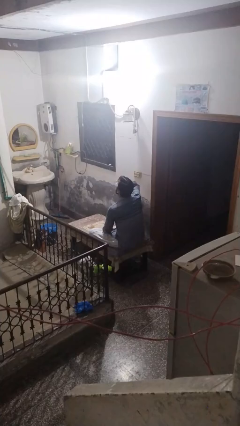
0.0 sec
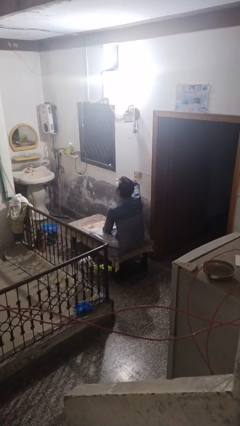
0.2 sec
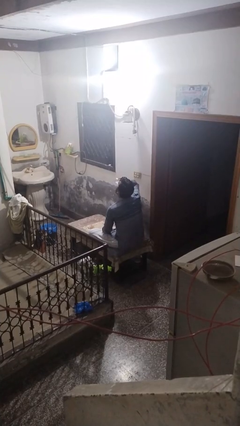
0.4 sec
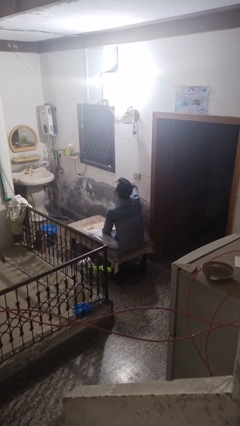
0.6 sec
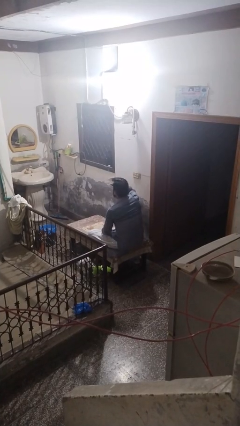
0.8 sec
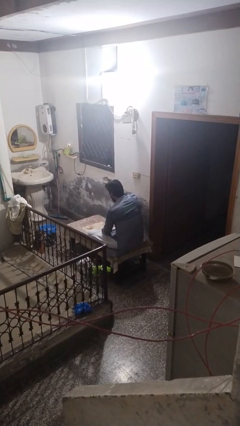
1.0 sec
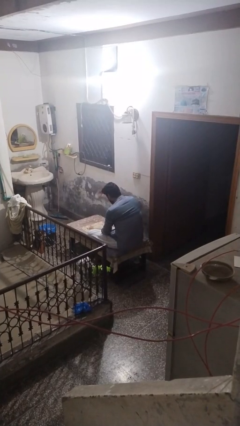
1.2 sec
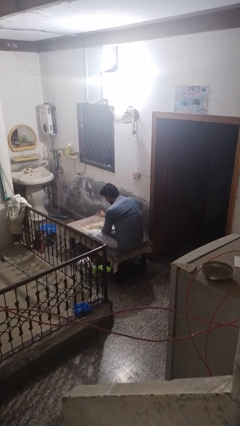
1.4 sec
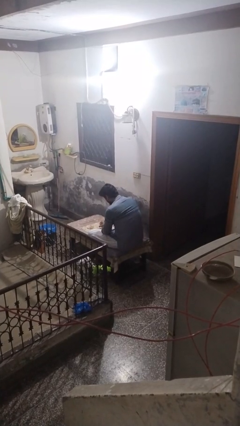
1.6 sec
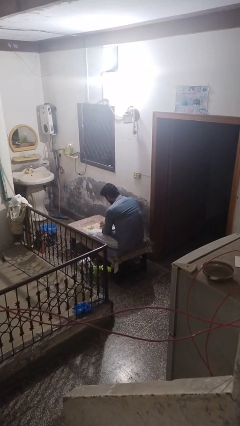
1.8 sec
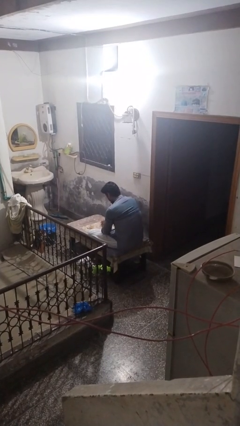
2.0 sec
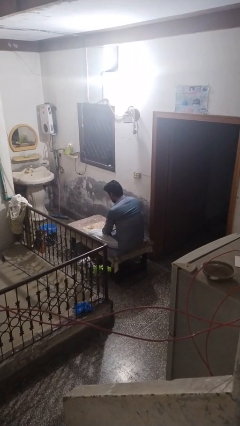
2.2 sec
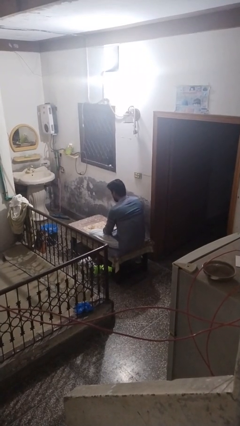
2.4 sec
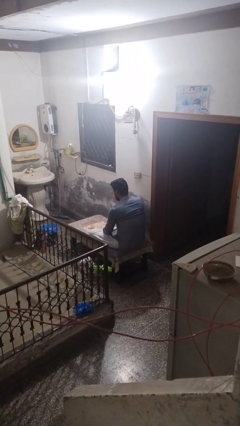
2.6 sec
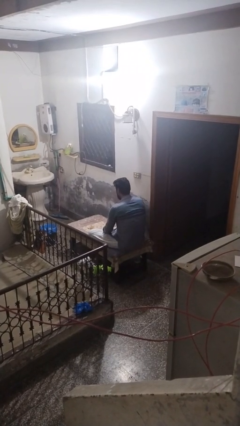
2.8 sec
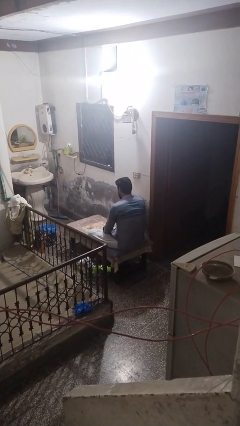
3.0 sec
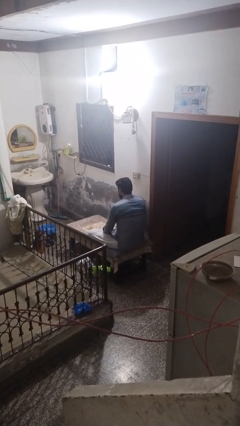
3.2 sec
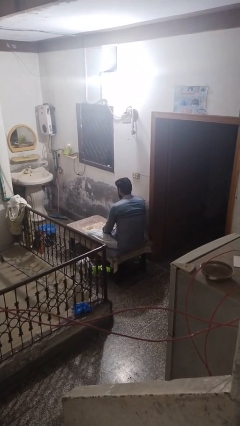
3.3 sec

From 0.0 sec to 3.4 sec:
person puts down object on table

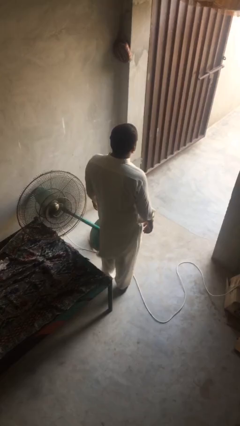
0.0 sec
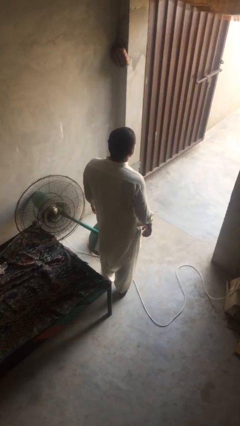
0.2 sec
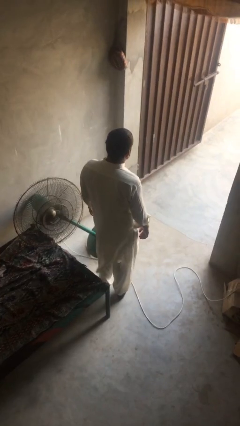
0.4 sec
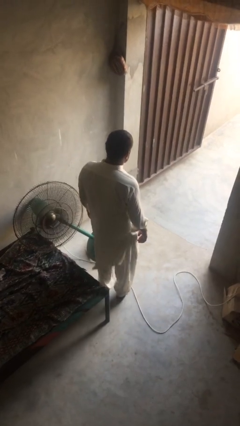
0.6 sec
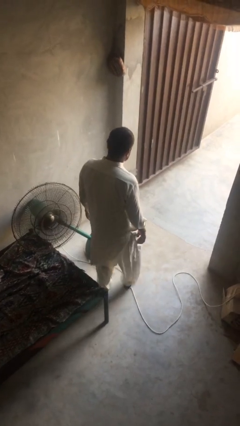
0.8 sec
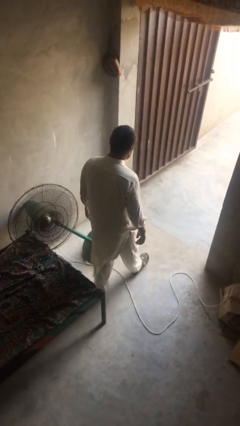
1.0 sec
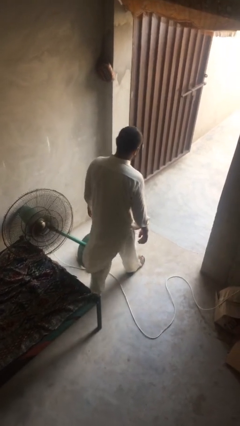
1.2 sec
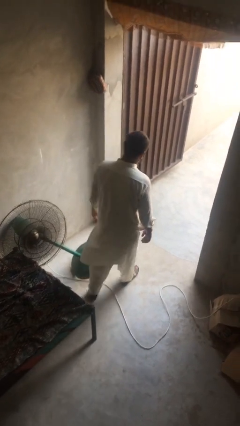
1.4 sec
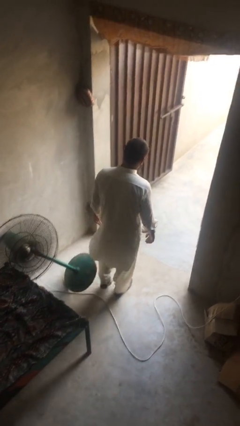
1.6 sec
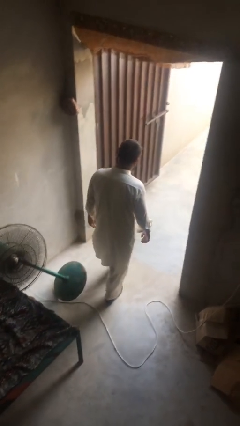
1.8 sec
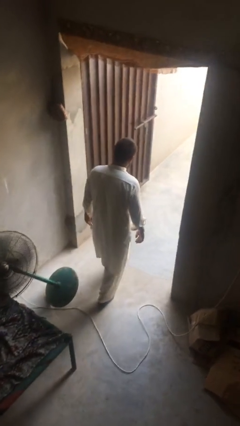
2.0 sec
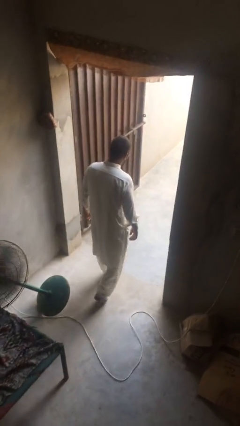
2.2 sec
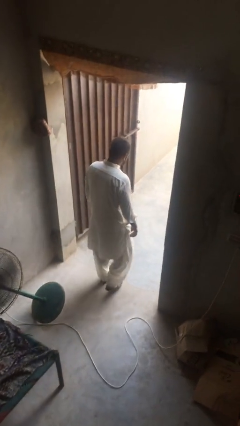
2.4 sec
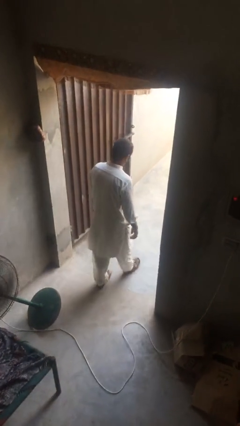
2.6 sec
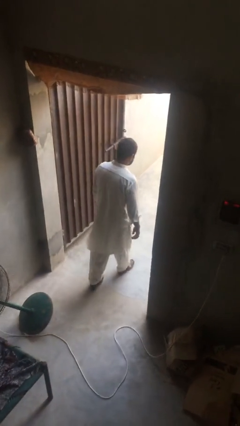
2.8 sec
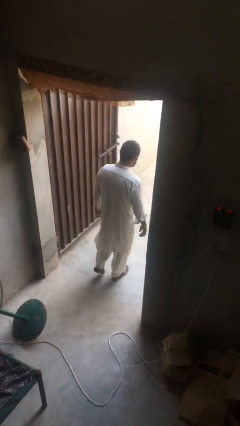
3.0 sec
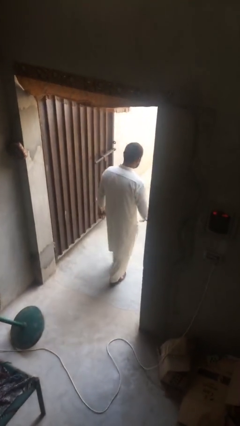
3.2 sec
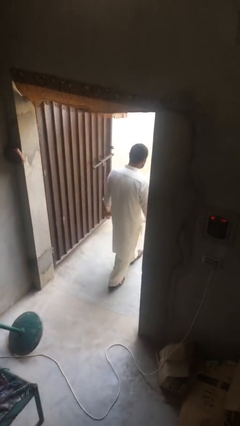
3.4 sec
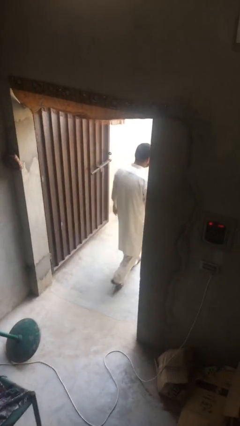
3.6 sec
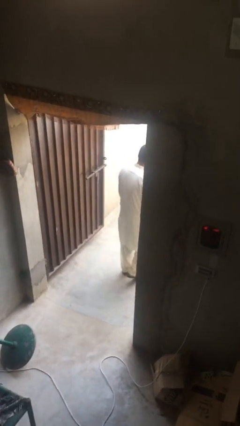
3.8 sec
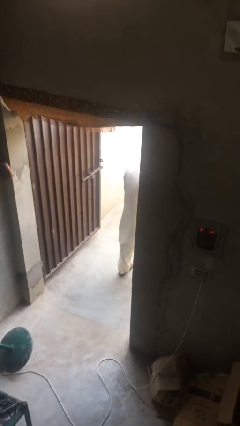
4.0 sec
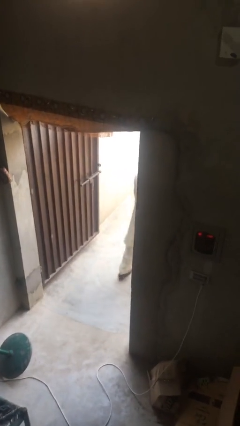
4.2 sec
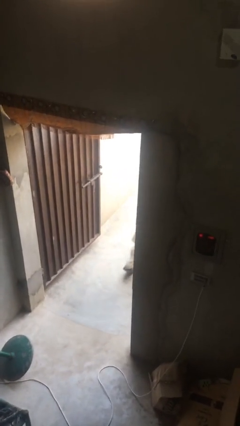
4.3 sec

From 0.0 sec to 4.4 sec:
person exits scene through structure

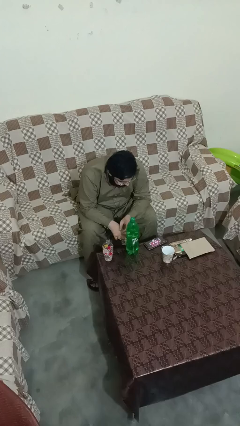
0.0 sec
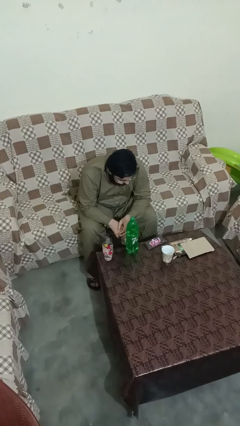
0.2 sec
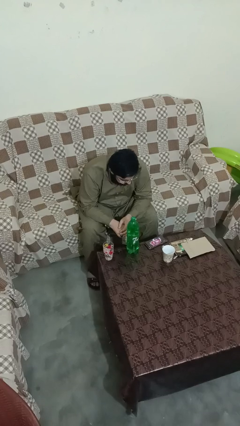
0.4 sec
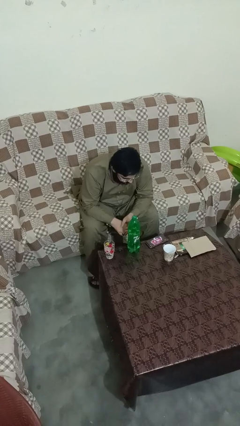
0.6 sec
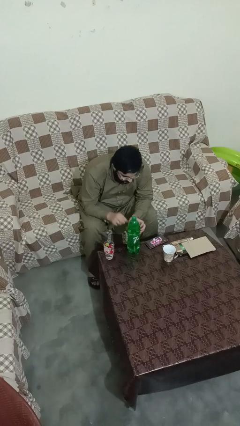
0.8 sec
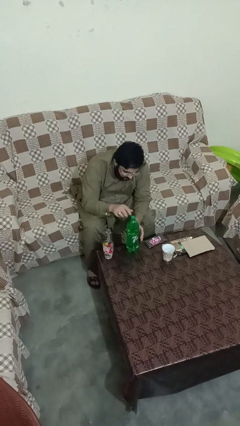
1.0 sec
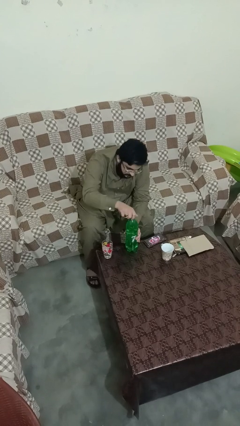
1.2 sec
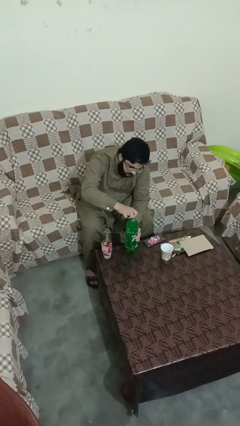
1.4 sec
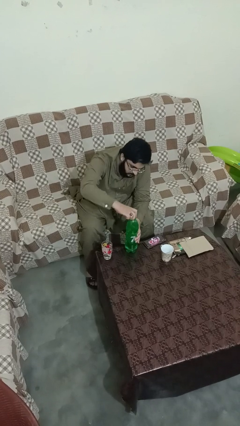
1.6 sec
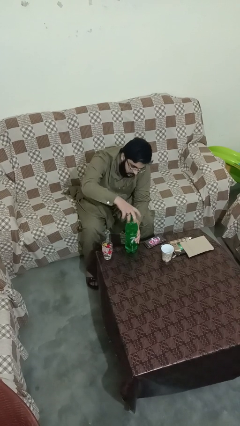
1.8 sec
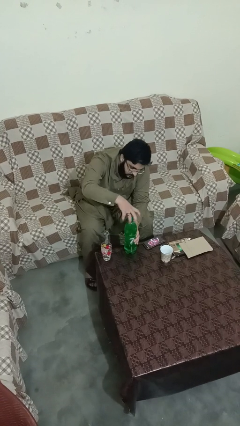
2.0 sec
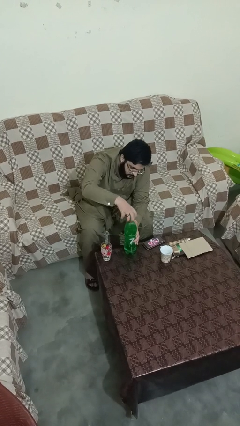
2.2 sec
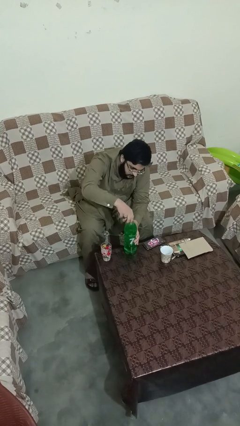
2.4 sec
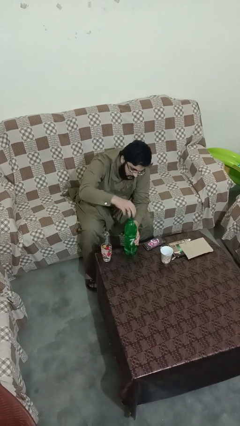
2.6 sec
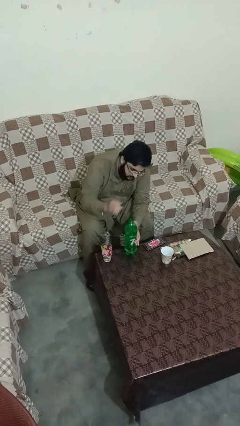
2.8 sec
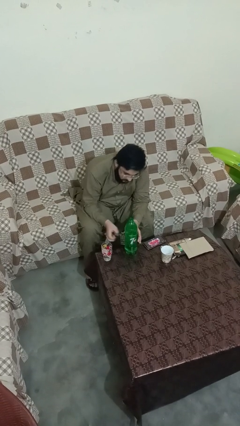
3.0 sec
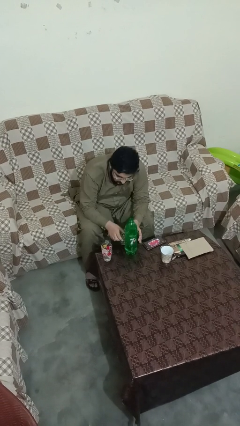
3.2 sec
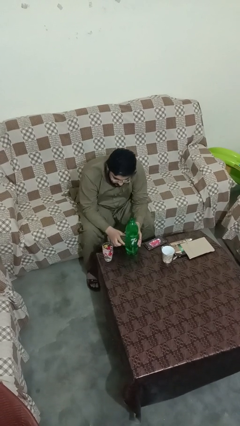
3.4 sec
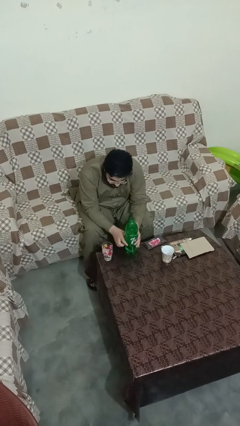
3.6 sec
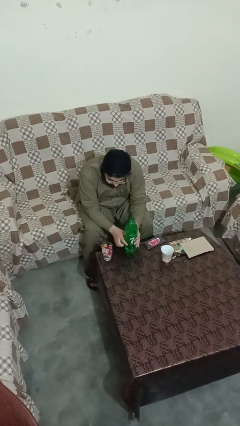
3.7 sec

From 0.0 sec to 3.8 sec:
person unscrews lid from bottle

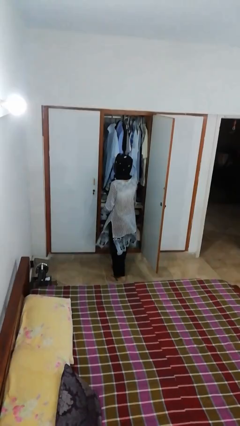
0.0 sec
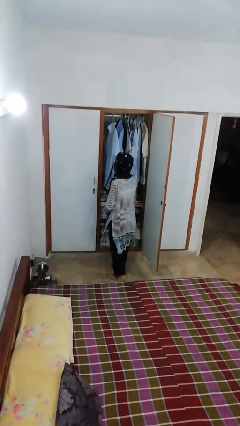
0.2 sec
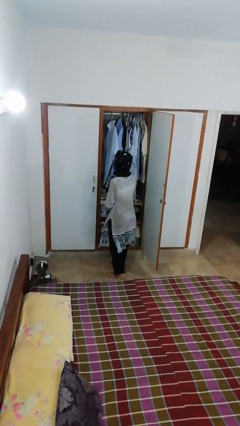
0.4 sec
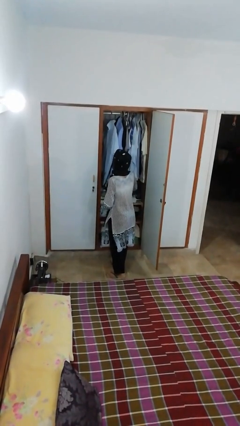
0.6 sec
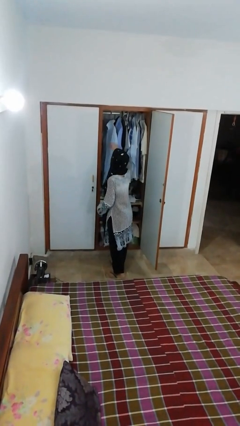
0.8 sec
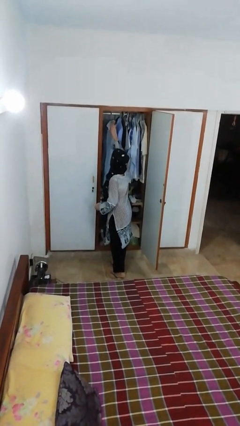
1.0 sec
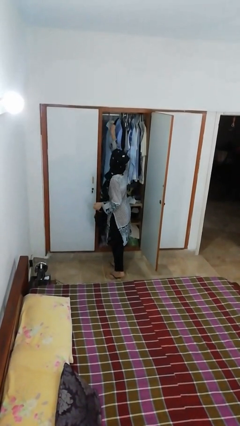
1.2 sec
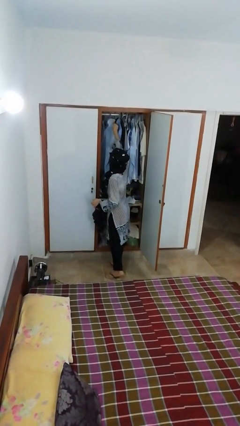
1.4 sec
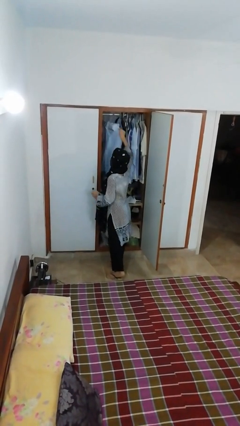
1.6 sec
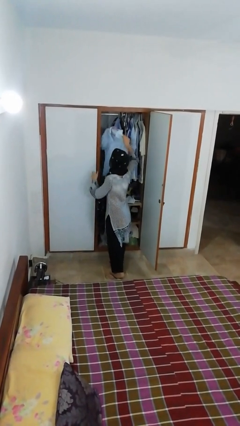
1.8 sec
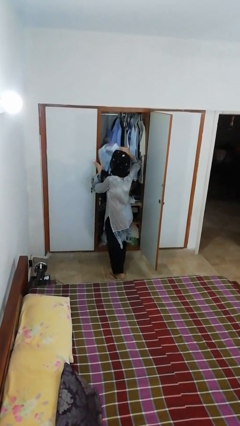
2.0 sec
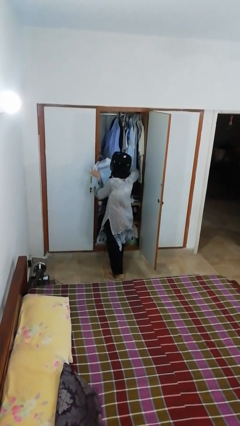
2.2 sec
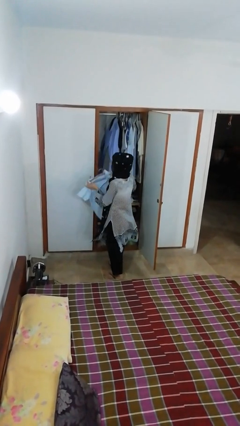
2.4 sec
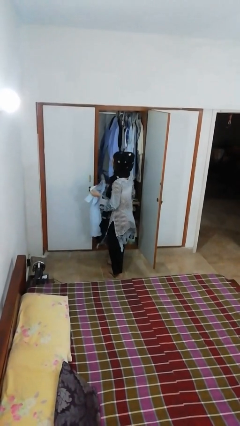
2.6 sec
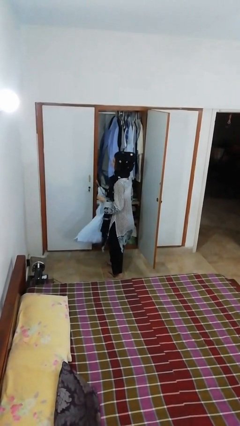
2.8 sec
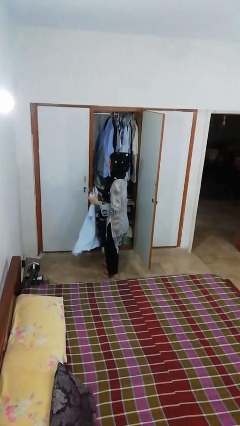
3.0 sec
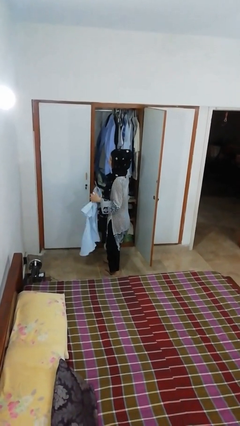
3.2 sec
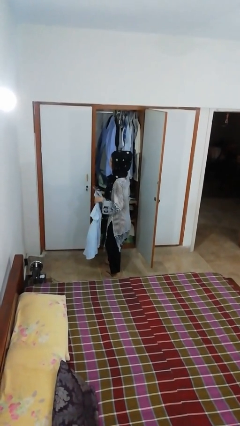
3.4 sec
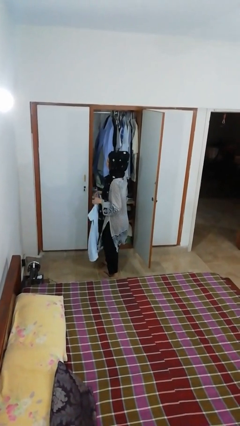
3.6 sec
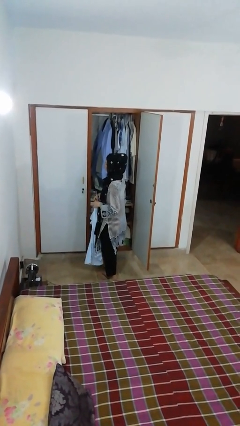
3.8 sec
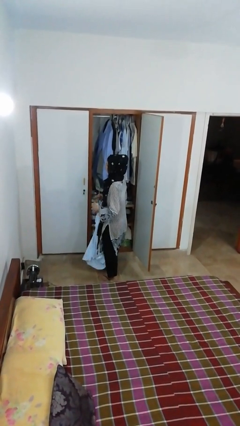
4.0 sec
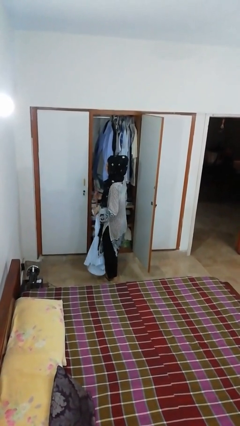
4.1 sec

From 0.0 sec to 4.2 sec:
person takes clothes from closet

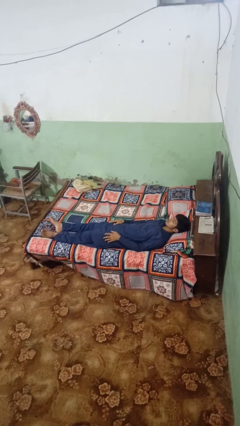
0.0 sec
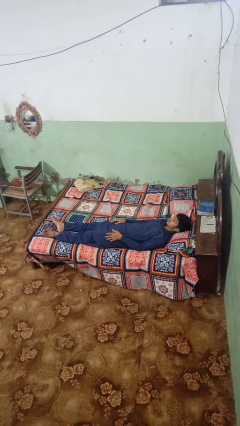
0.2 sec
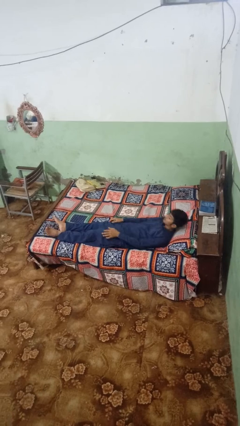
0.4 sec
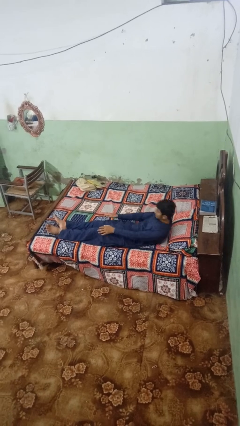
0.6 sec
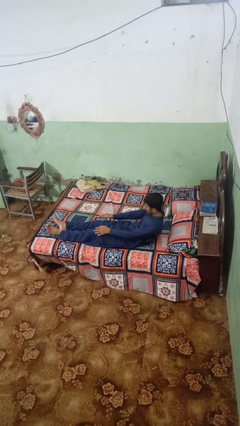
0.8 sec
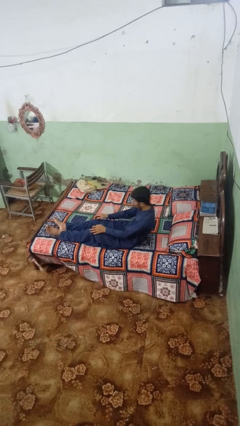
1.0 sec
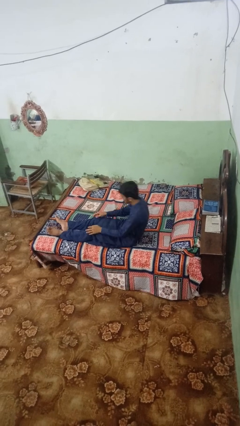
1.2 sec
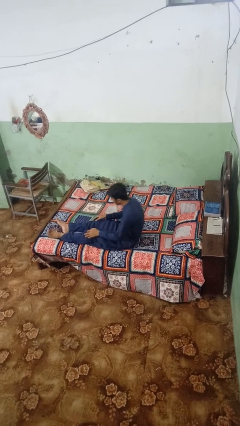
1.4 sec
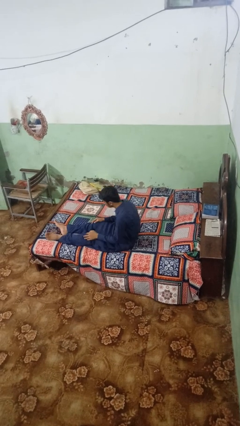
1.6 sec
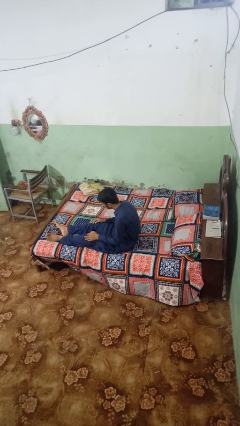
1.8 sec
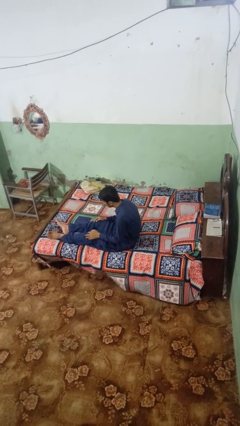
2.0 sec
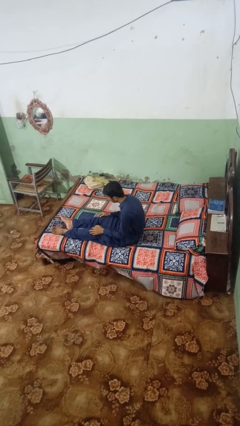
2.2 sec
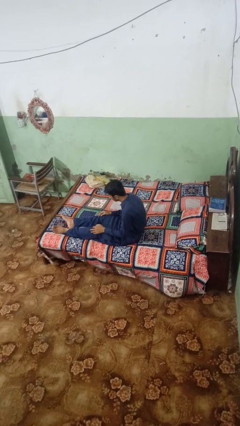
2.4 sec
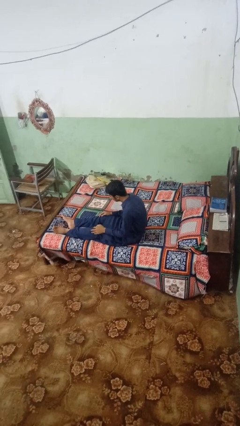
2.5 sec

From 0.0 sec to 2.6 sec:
person stands up
